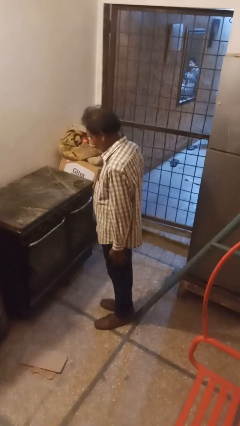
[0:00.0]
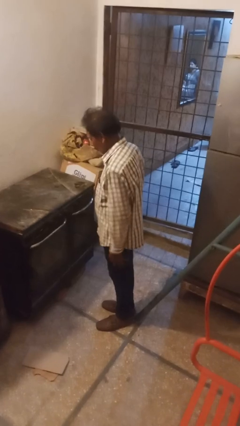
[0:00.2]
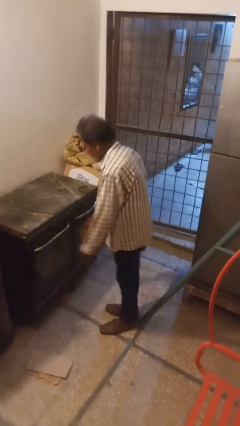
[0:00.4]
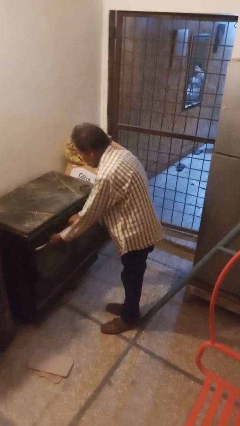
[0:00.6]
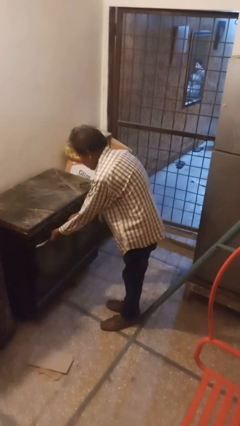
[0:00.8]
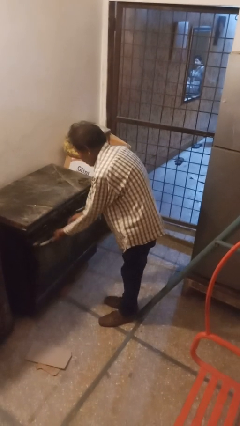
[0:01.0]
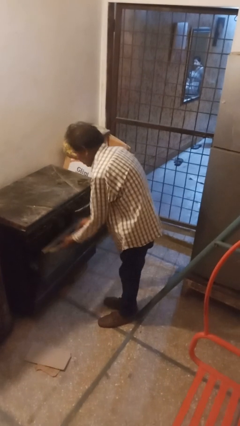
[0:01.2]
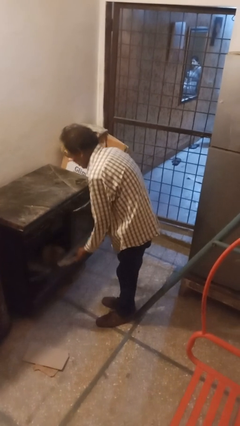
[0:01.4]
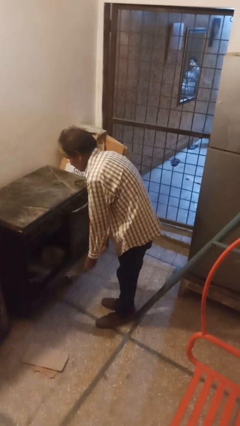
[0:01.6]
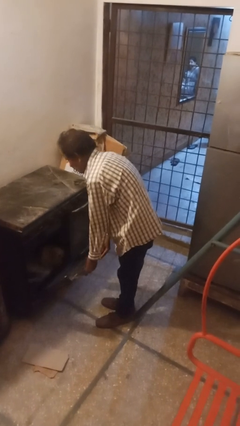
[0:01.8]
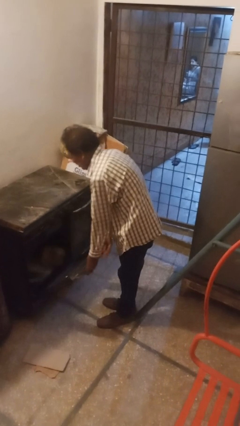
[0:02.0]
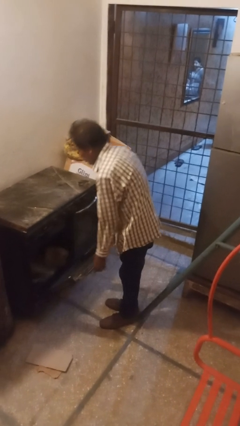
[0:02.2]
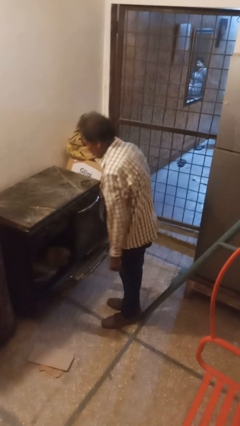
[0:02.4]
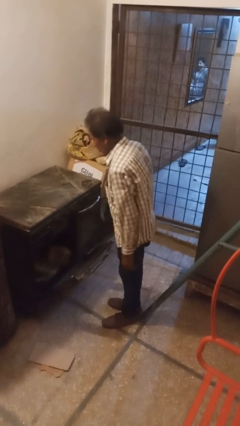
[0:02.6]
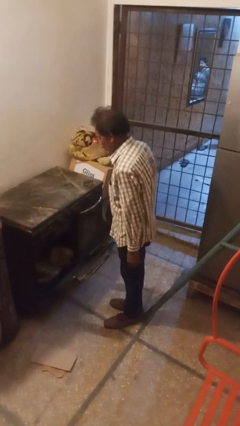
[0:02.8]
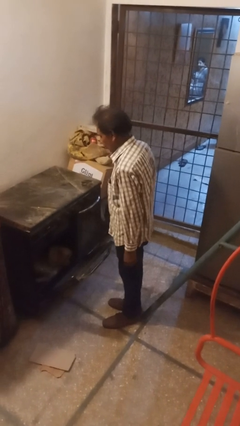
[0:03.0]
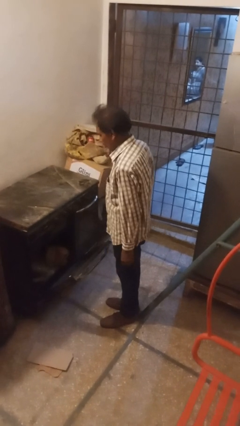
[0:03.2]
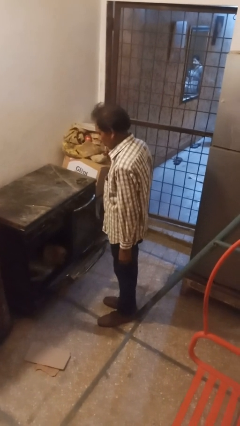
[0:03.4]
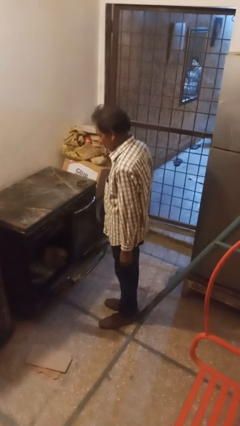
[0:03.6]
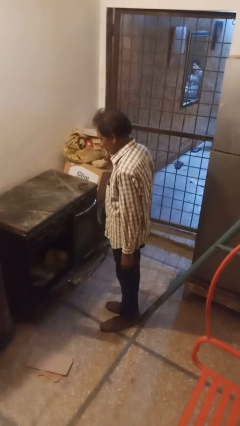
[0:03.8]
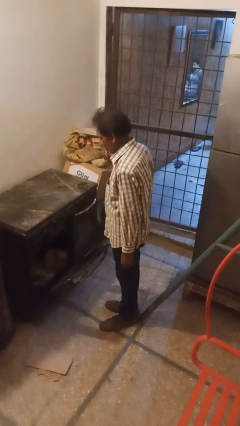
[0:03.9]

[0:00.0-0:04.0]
person opens oven door

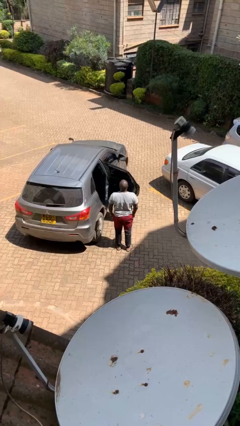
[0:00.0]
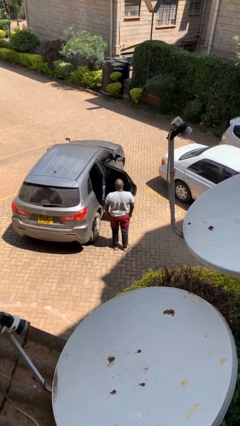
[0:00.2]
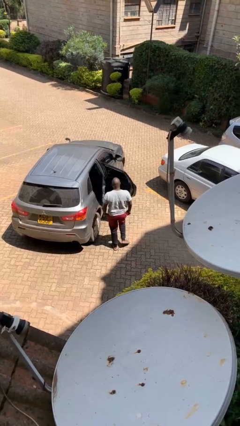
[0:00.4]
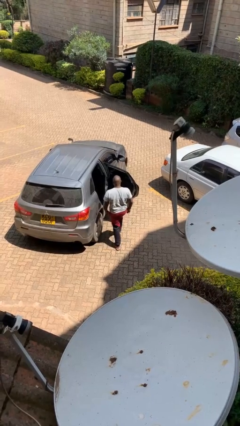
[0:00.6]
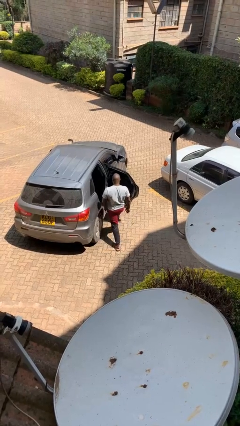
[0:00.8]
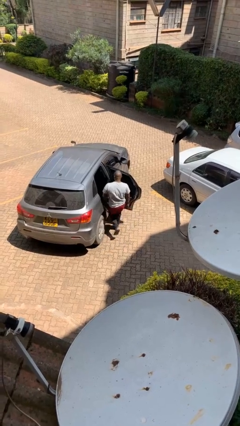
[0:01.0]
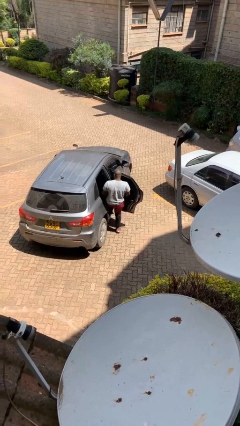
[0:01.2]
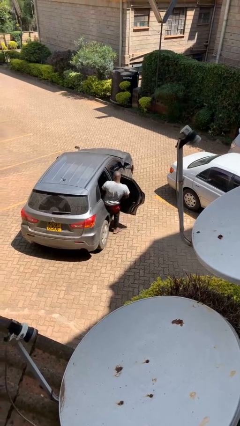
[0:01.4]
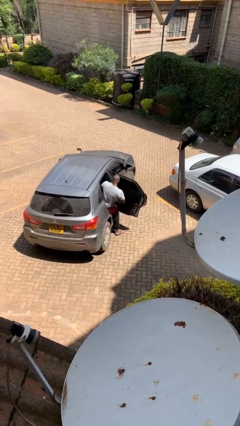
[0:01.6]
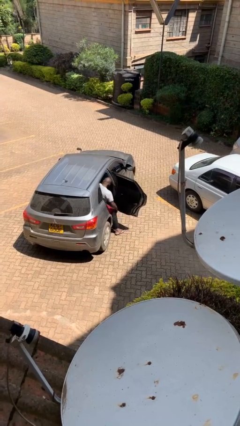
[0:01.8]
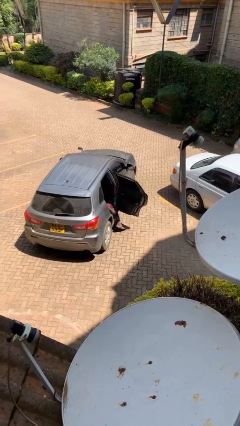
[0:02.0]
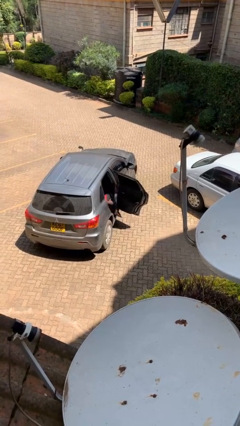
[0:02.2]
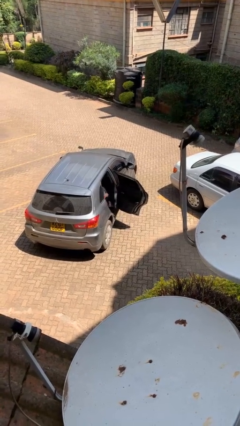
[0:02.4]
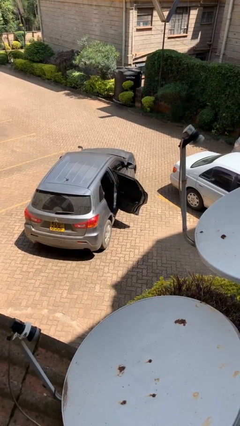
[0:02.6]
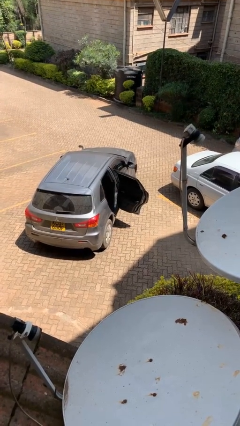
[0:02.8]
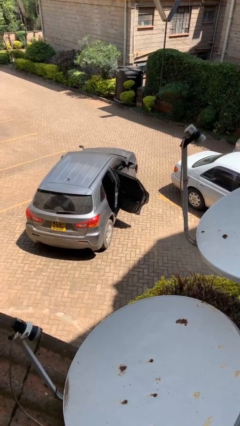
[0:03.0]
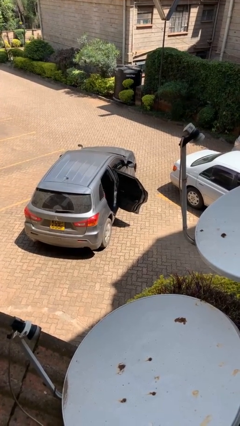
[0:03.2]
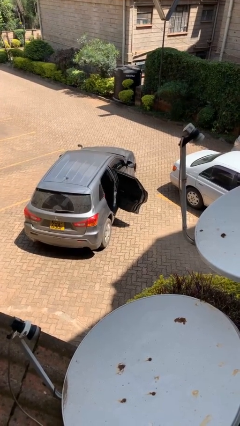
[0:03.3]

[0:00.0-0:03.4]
person enters car

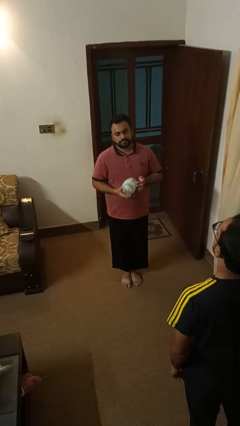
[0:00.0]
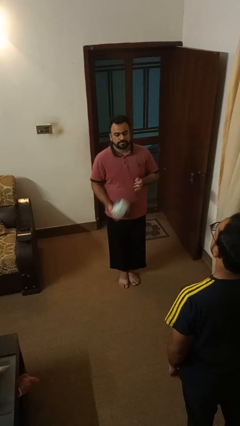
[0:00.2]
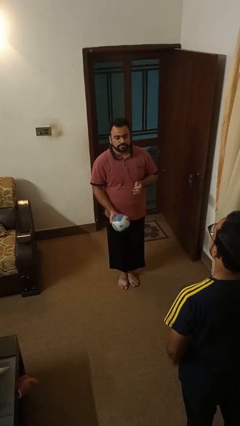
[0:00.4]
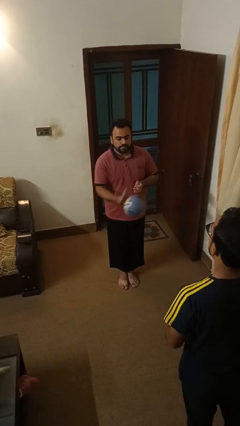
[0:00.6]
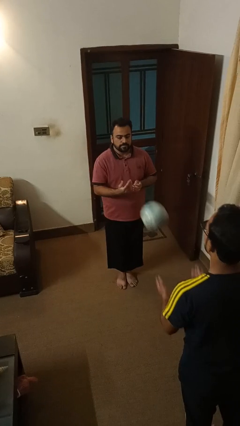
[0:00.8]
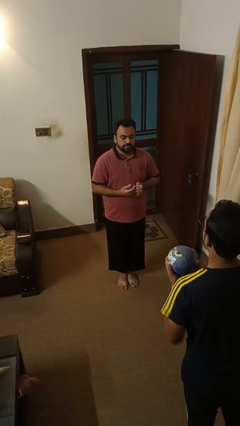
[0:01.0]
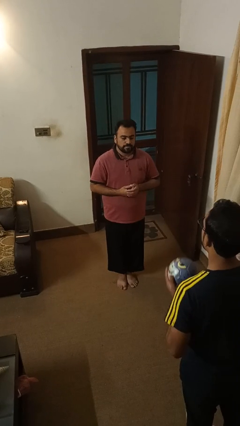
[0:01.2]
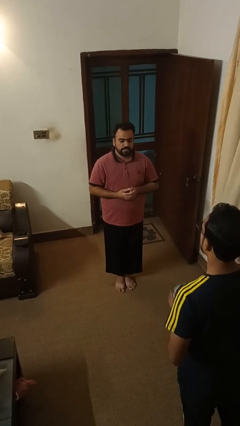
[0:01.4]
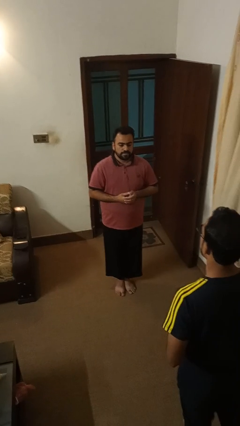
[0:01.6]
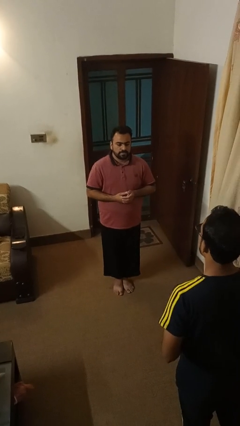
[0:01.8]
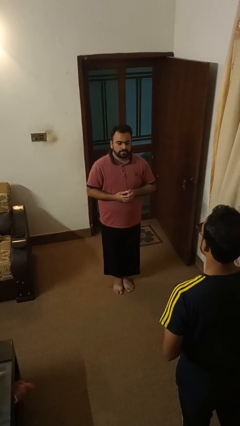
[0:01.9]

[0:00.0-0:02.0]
person throws object to person

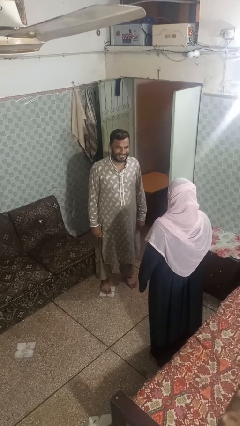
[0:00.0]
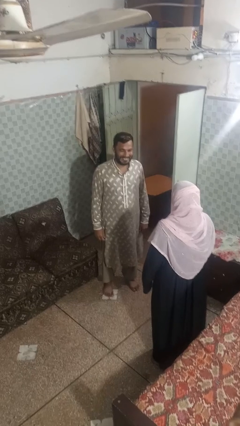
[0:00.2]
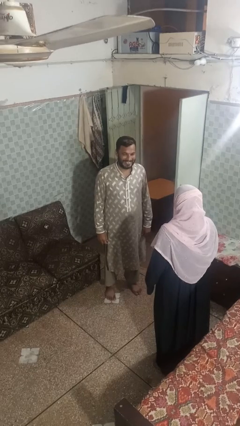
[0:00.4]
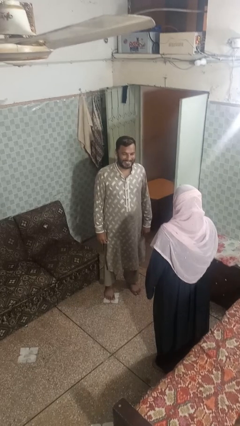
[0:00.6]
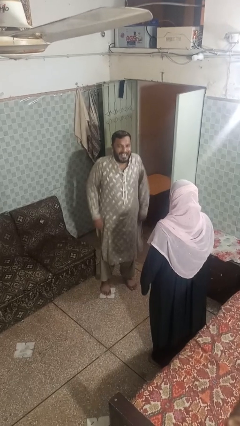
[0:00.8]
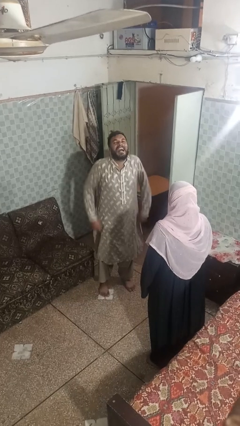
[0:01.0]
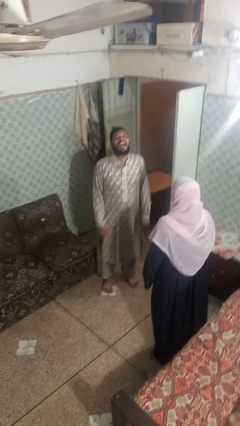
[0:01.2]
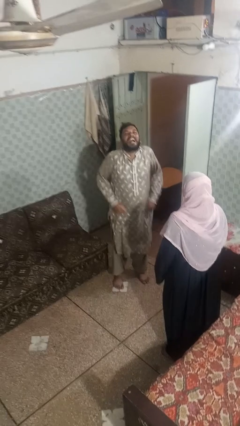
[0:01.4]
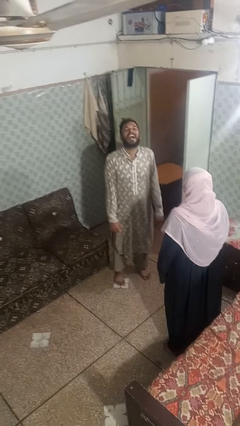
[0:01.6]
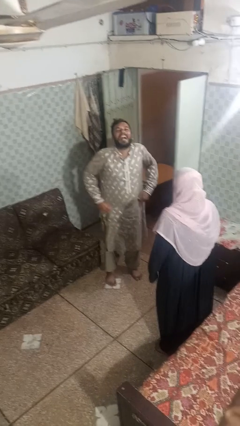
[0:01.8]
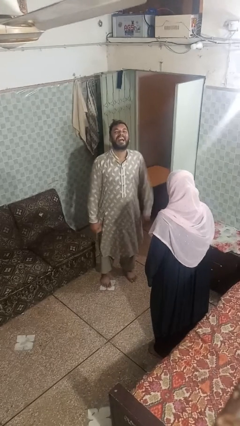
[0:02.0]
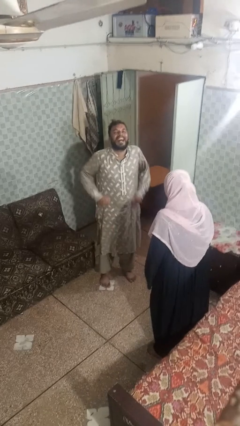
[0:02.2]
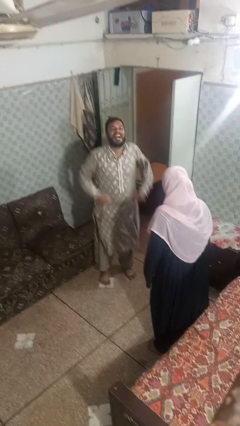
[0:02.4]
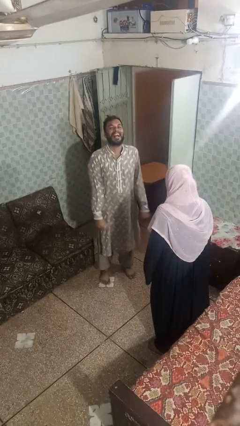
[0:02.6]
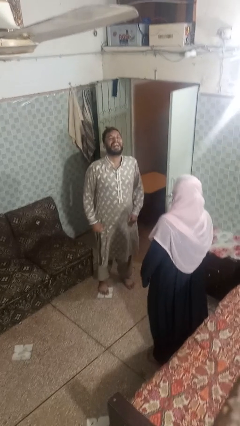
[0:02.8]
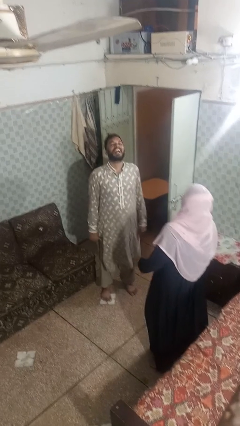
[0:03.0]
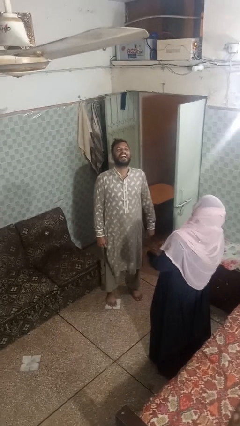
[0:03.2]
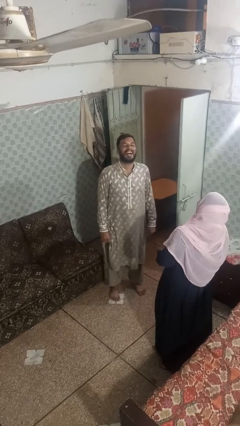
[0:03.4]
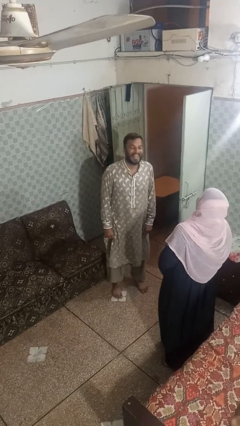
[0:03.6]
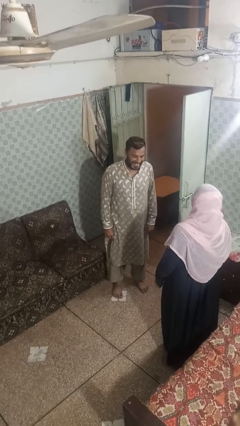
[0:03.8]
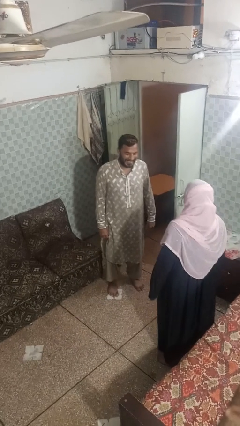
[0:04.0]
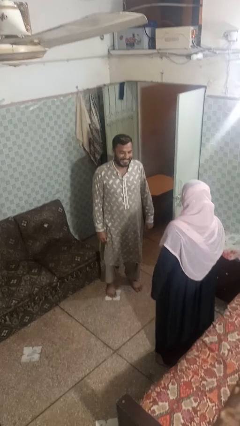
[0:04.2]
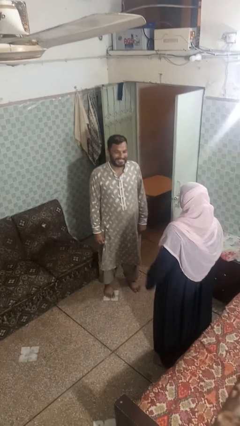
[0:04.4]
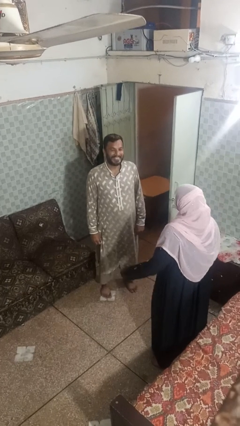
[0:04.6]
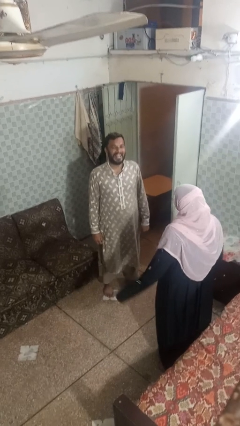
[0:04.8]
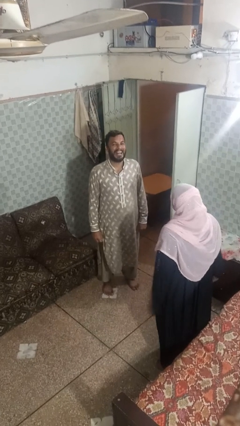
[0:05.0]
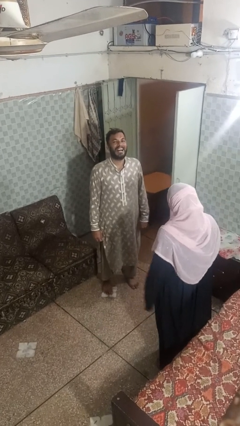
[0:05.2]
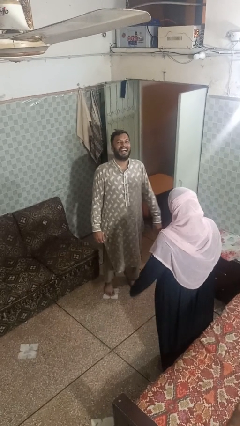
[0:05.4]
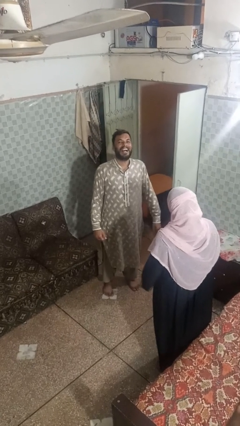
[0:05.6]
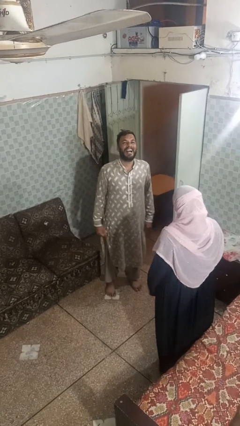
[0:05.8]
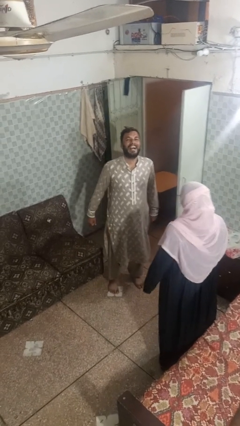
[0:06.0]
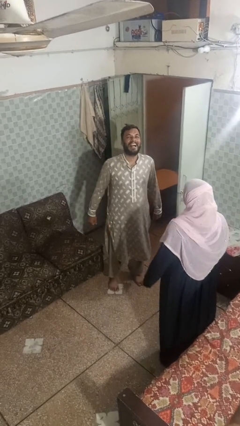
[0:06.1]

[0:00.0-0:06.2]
person laughs with person

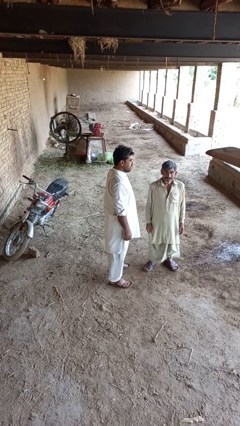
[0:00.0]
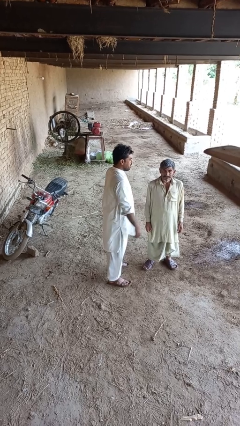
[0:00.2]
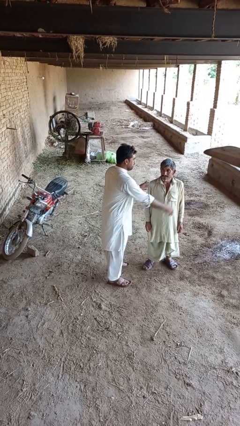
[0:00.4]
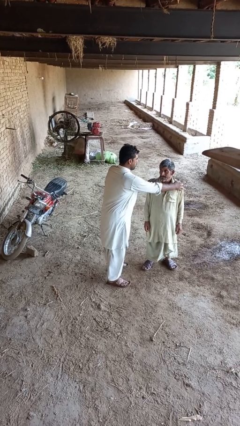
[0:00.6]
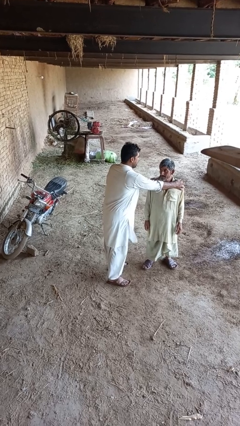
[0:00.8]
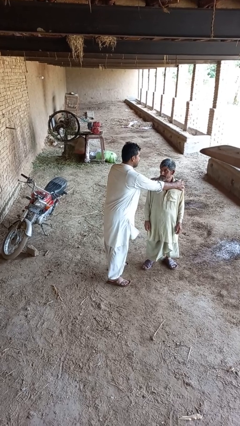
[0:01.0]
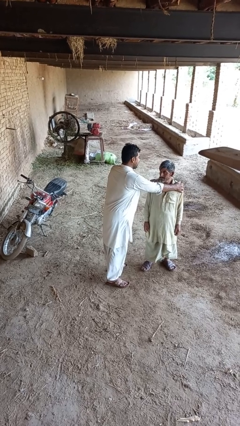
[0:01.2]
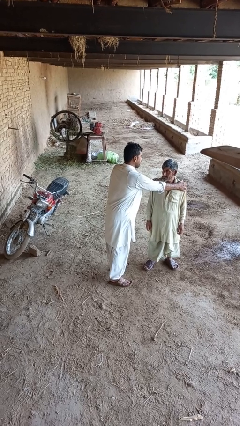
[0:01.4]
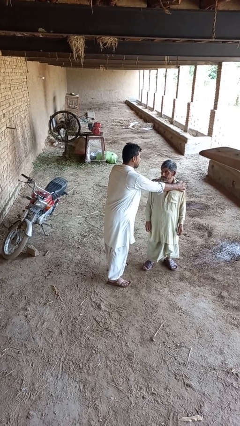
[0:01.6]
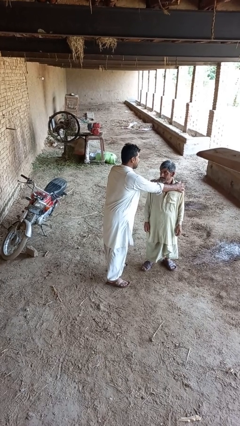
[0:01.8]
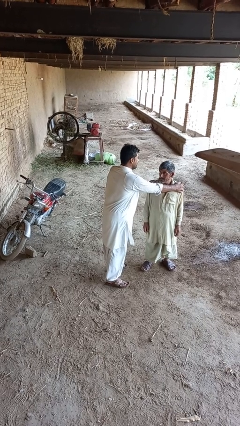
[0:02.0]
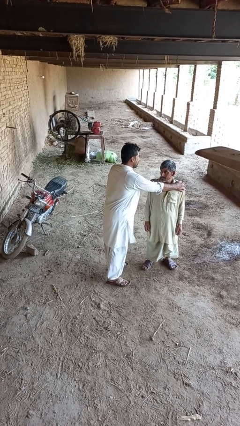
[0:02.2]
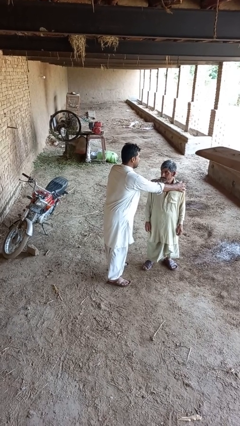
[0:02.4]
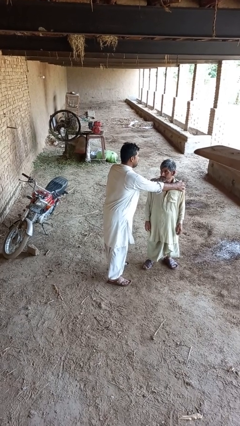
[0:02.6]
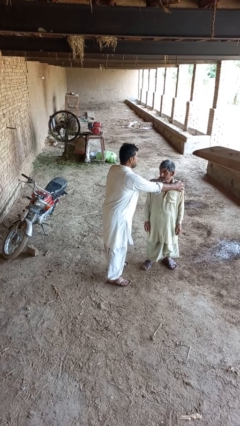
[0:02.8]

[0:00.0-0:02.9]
person grabs person by shoulder
